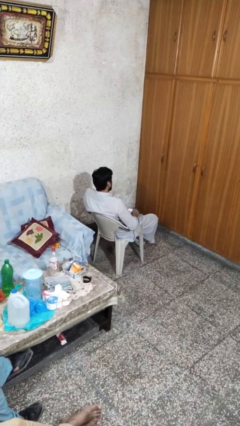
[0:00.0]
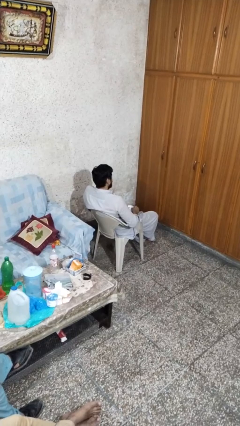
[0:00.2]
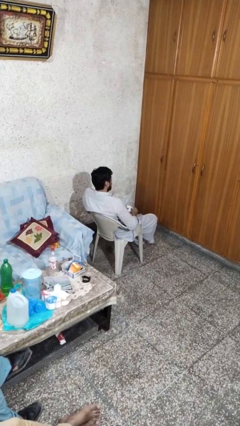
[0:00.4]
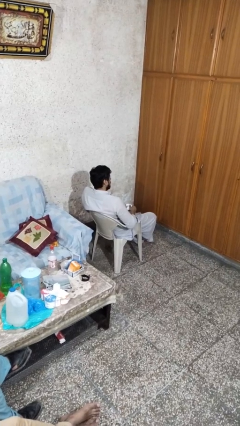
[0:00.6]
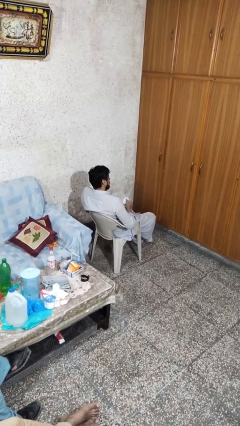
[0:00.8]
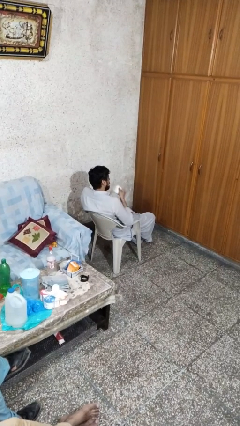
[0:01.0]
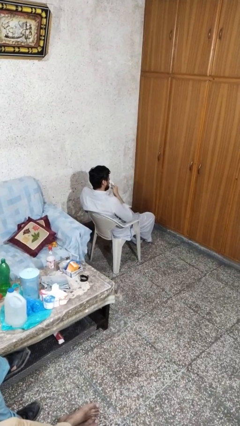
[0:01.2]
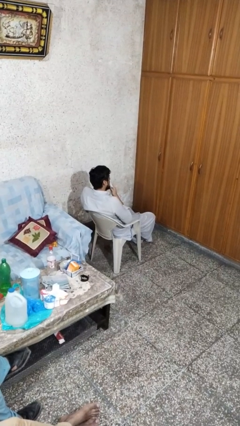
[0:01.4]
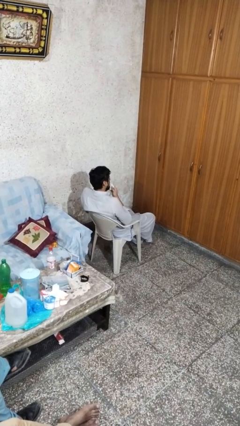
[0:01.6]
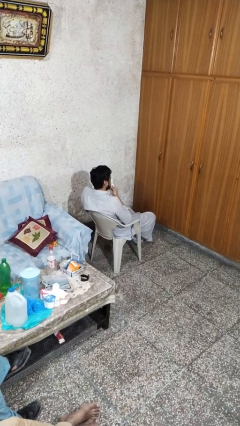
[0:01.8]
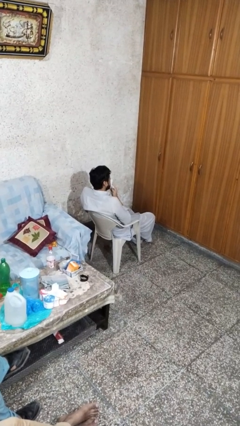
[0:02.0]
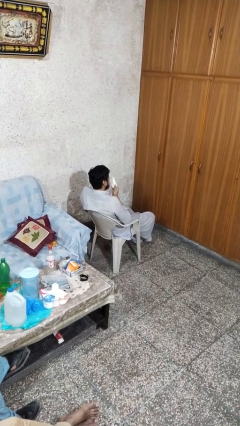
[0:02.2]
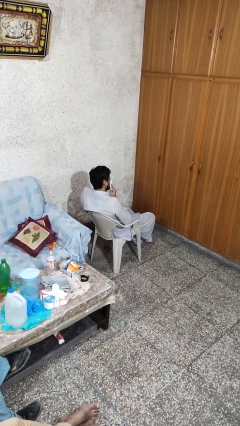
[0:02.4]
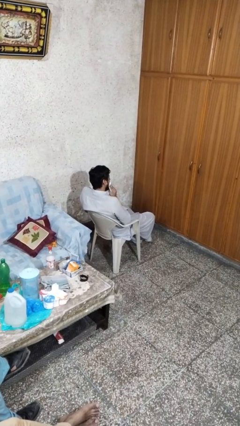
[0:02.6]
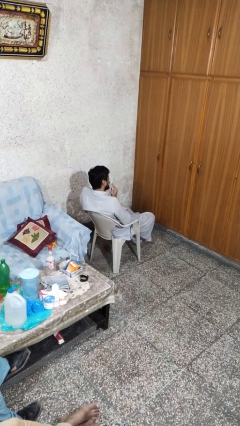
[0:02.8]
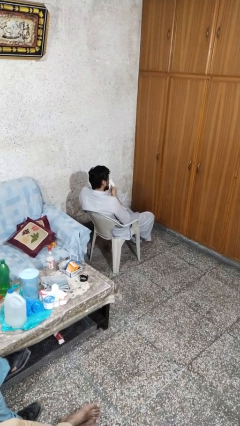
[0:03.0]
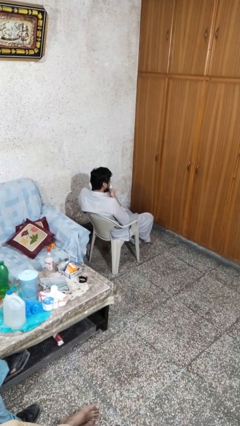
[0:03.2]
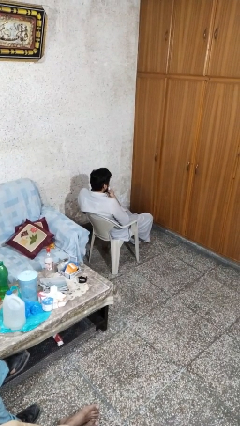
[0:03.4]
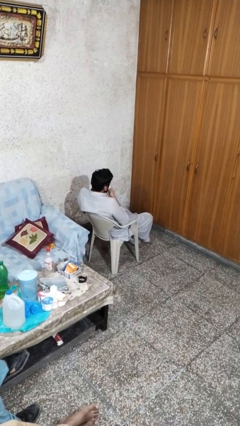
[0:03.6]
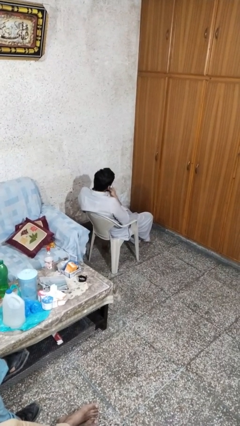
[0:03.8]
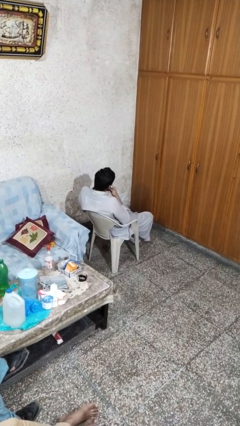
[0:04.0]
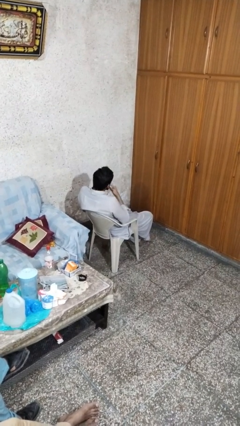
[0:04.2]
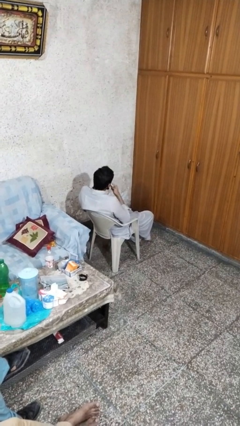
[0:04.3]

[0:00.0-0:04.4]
person wipes mouth with napkin

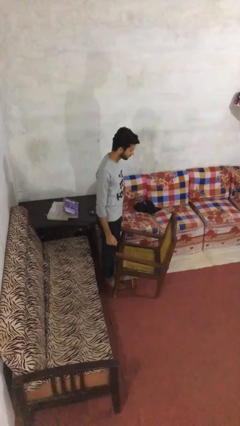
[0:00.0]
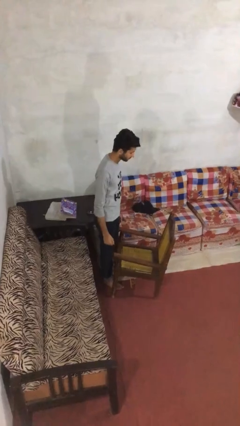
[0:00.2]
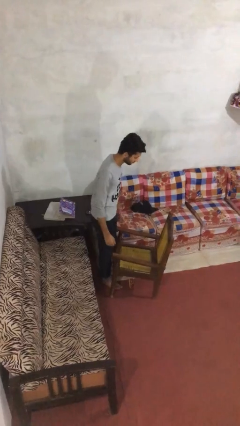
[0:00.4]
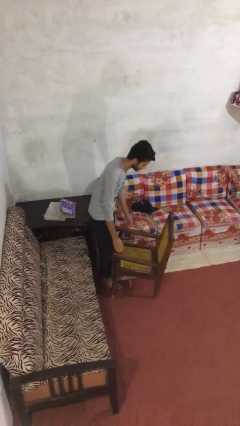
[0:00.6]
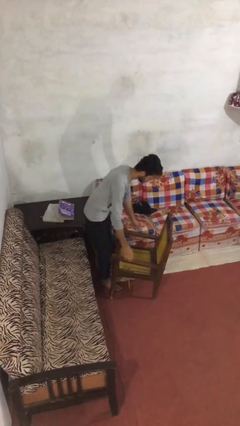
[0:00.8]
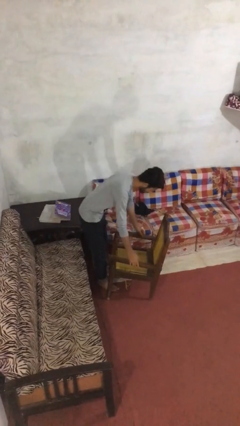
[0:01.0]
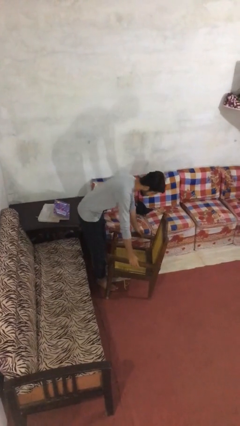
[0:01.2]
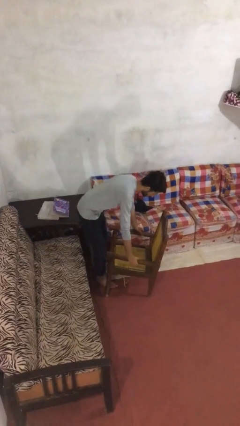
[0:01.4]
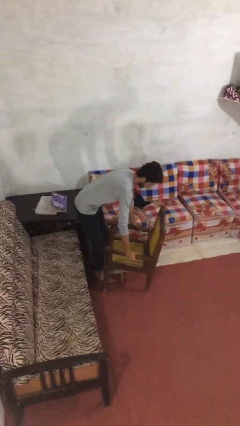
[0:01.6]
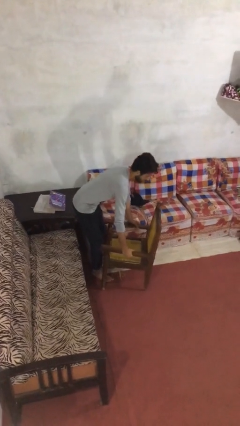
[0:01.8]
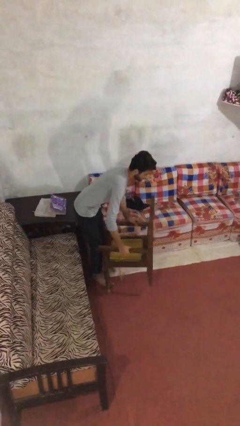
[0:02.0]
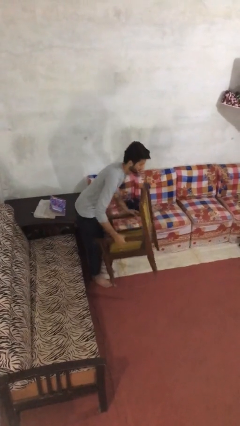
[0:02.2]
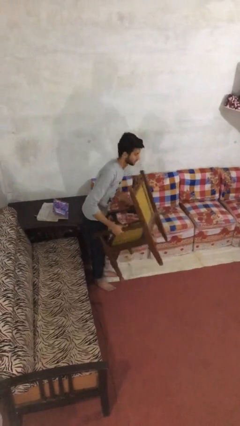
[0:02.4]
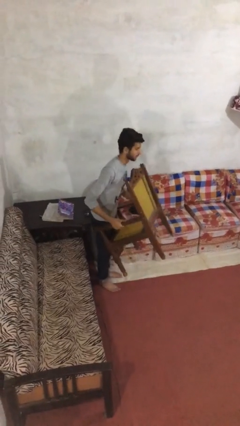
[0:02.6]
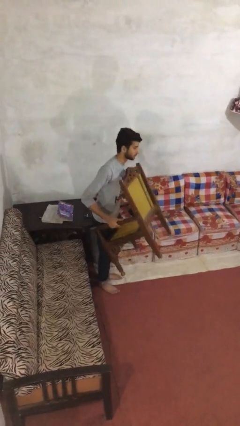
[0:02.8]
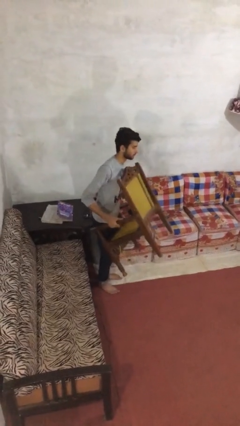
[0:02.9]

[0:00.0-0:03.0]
person picks up object from floor

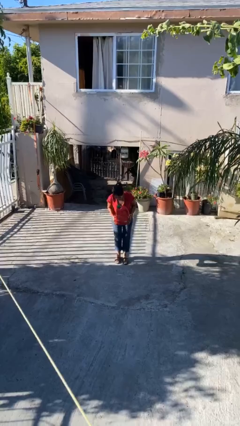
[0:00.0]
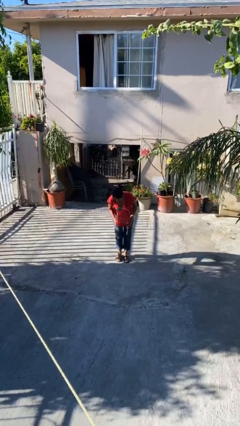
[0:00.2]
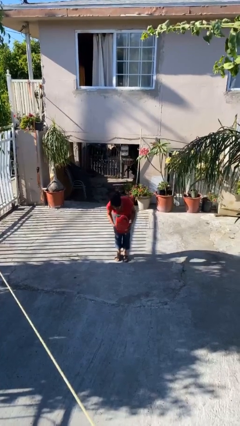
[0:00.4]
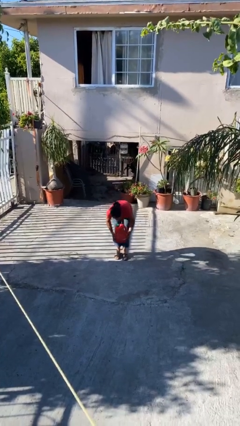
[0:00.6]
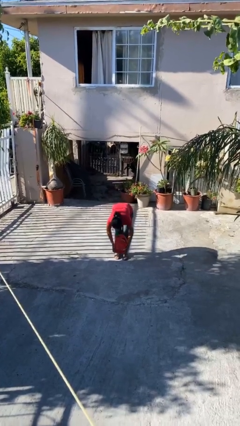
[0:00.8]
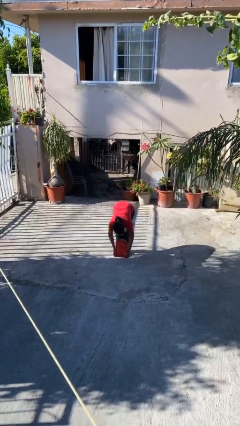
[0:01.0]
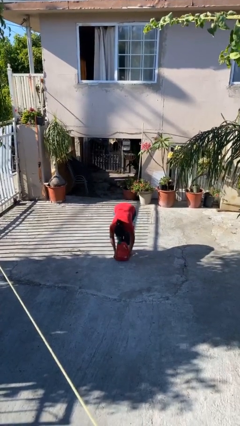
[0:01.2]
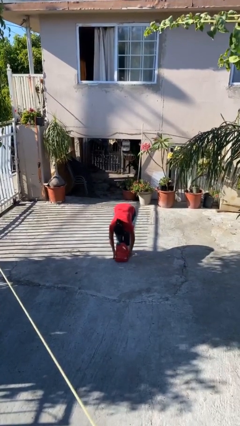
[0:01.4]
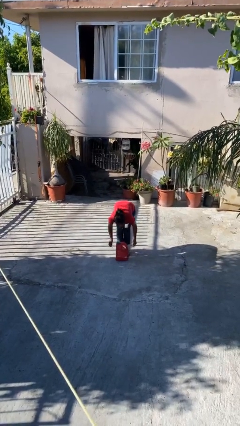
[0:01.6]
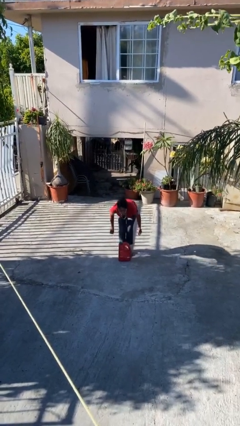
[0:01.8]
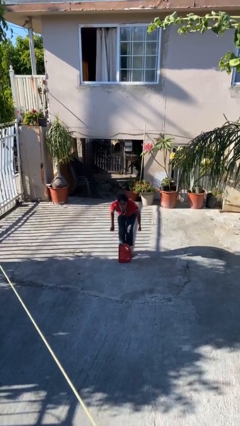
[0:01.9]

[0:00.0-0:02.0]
person puts down object on floor

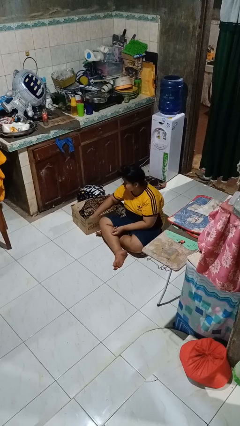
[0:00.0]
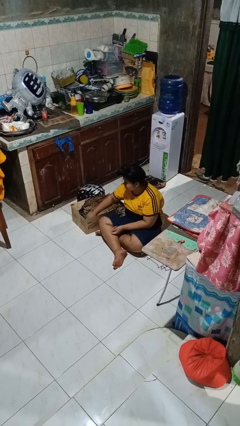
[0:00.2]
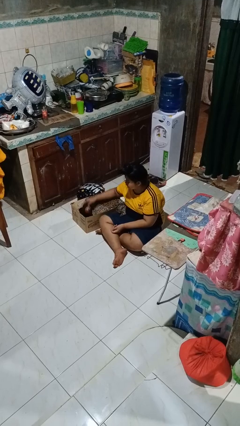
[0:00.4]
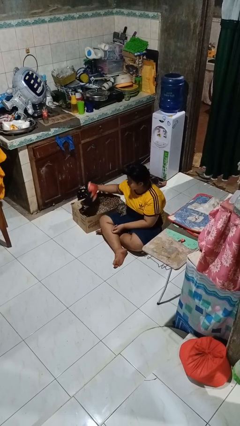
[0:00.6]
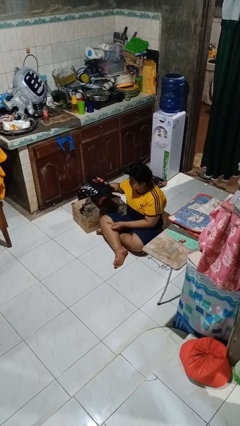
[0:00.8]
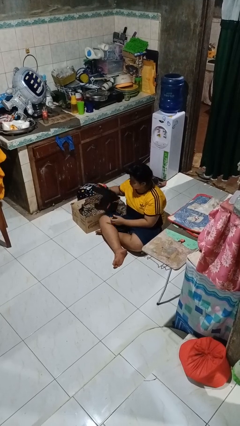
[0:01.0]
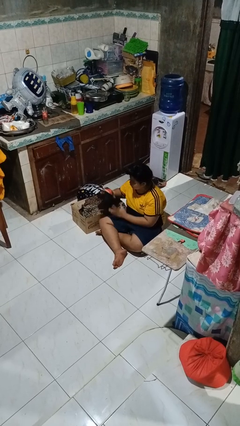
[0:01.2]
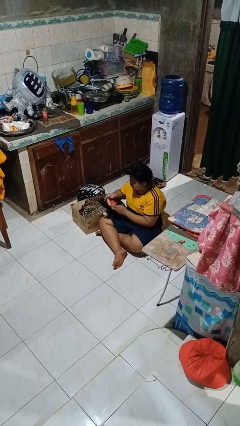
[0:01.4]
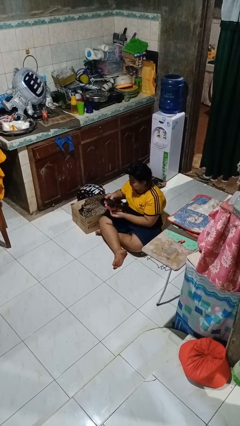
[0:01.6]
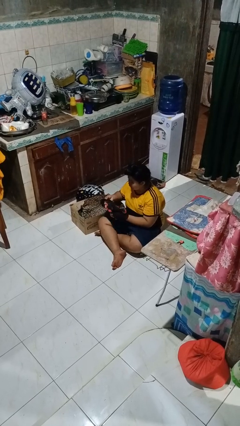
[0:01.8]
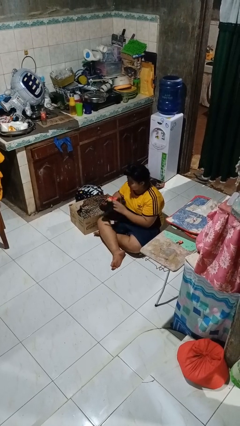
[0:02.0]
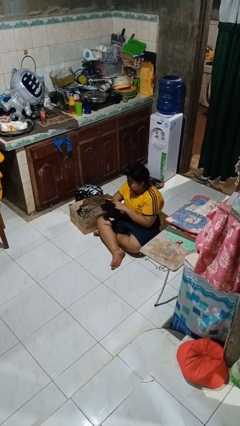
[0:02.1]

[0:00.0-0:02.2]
person takes object from box

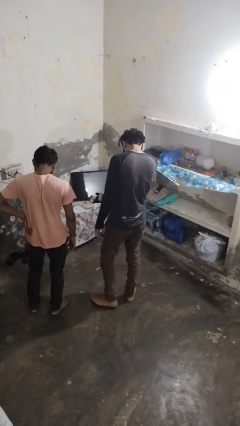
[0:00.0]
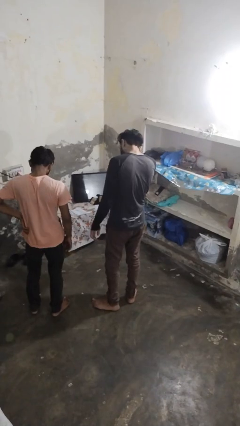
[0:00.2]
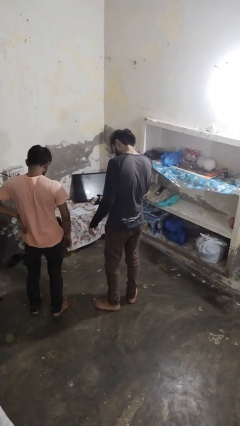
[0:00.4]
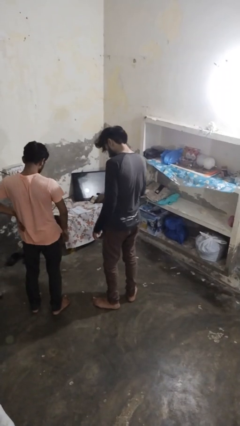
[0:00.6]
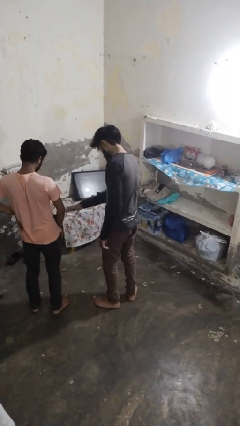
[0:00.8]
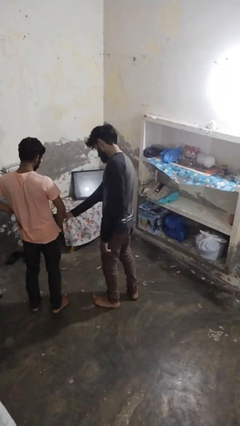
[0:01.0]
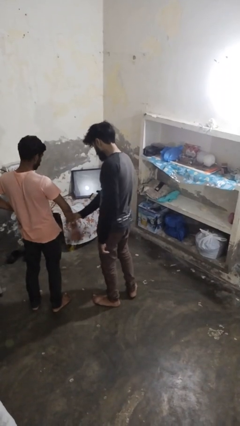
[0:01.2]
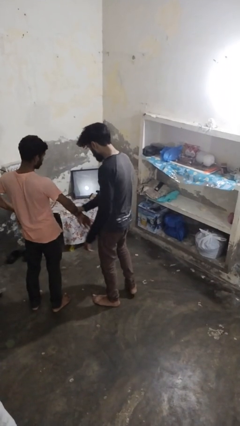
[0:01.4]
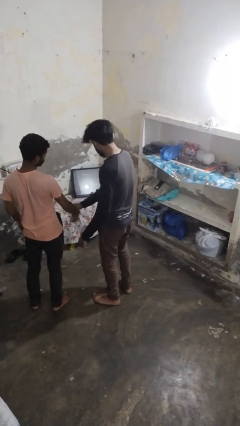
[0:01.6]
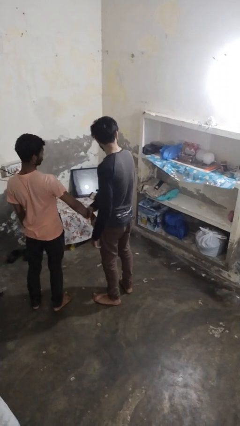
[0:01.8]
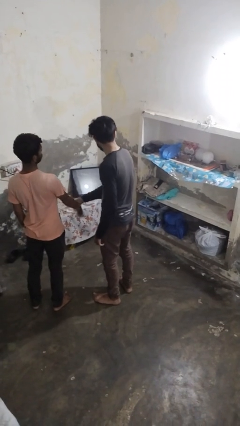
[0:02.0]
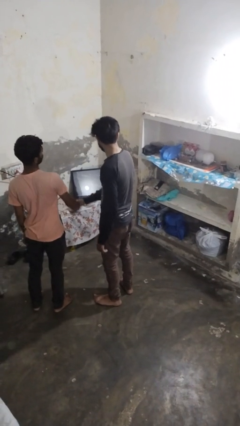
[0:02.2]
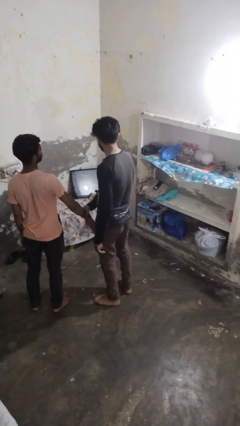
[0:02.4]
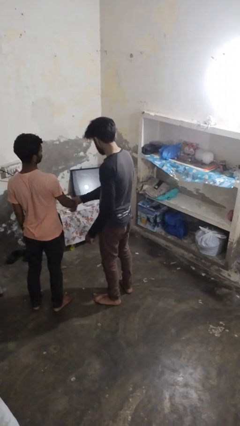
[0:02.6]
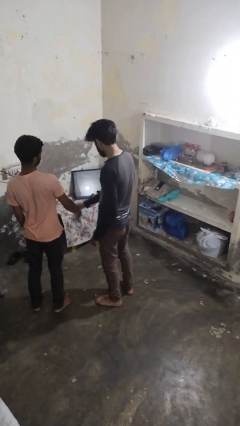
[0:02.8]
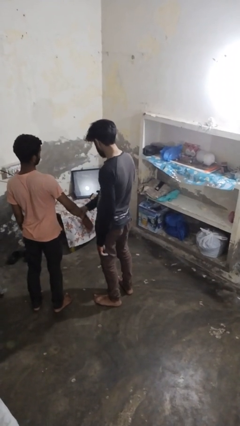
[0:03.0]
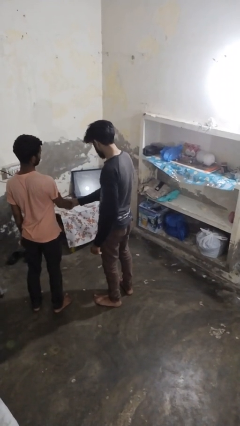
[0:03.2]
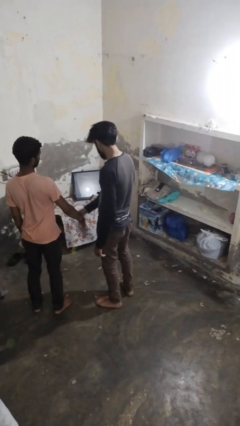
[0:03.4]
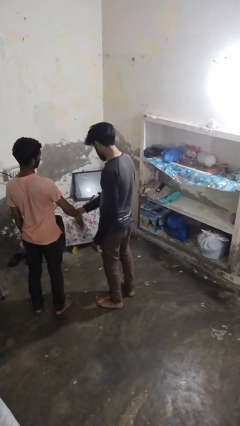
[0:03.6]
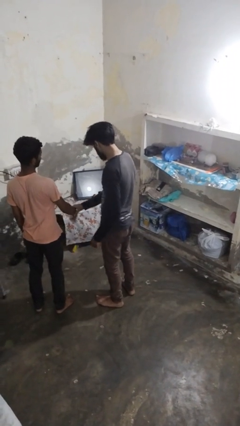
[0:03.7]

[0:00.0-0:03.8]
person grabs person by forearm

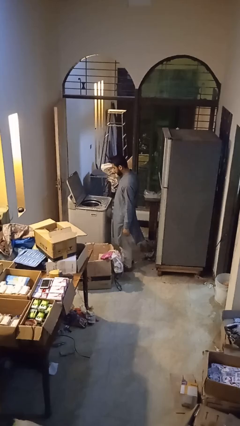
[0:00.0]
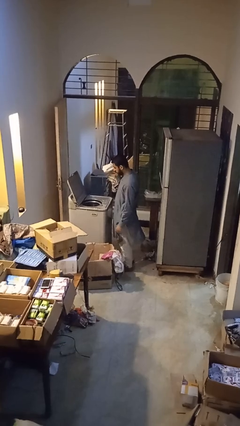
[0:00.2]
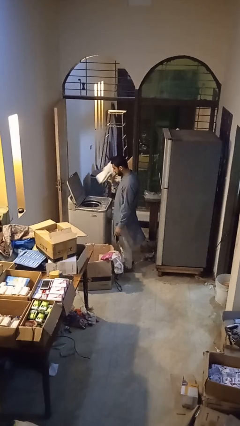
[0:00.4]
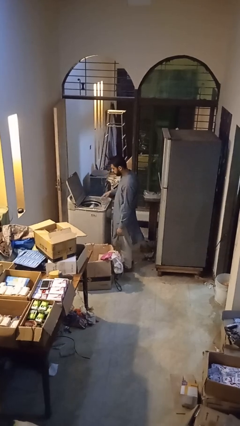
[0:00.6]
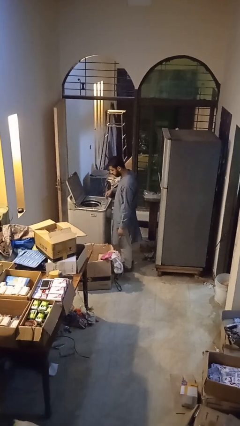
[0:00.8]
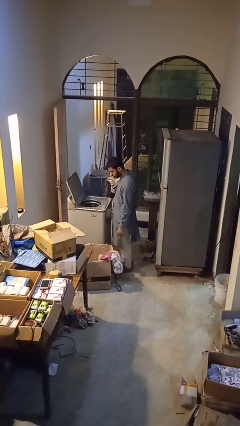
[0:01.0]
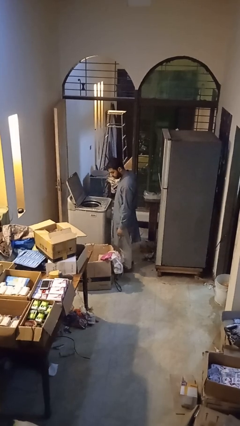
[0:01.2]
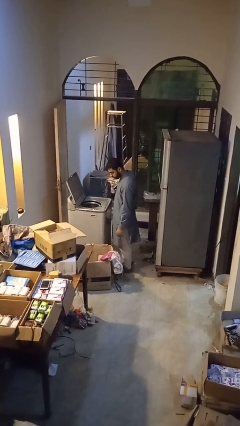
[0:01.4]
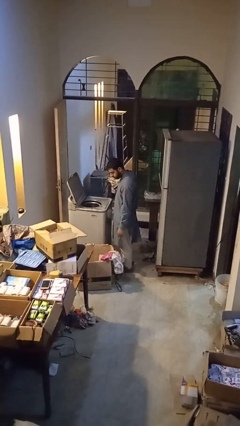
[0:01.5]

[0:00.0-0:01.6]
person loads clotheswasher

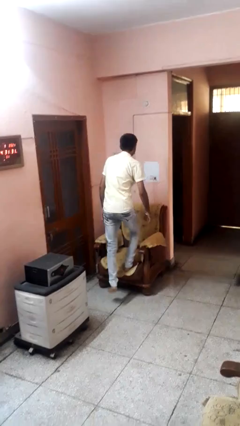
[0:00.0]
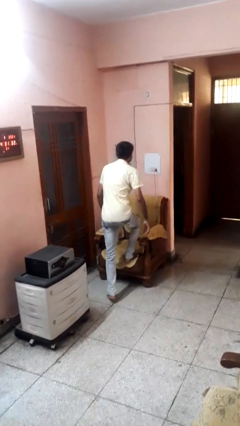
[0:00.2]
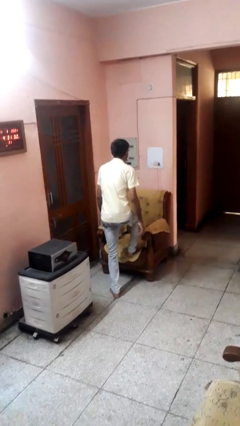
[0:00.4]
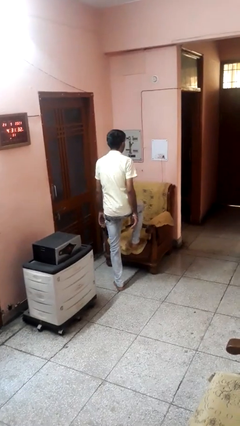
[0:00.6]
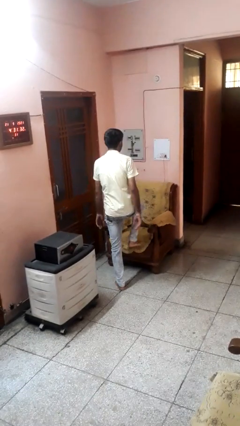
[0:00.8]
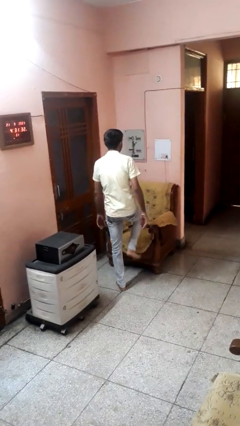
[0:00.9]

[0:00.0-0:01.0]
person climbs off couch
